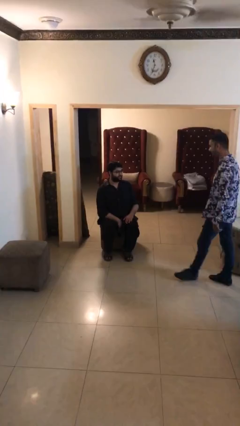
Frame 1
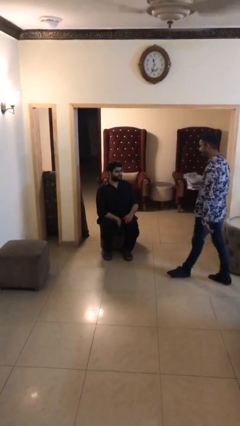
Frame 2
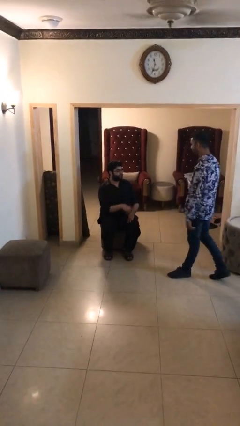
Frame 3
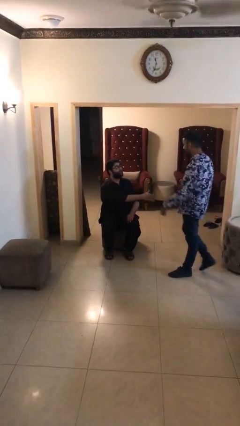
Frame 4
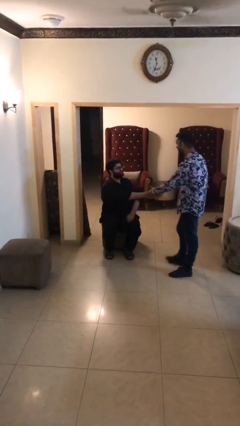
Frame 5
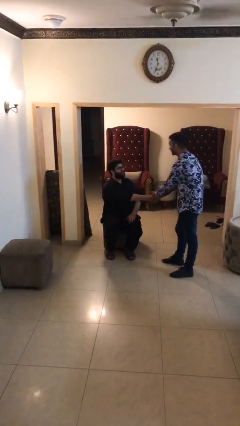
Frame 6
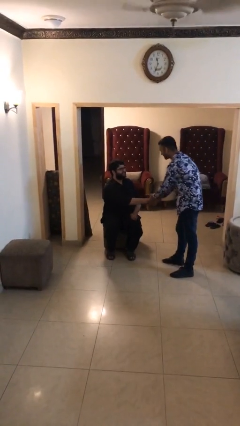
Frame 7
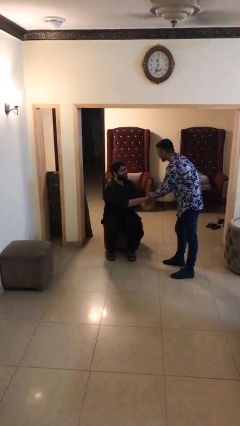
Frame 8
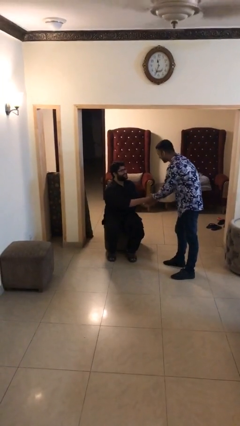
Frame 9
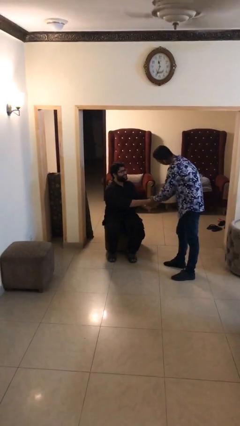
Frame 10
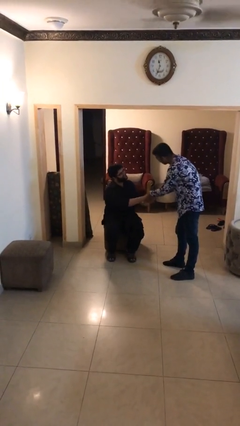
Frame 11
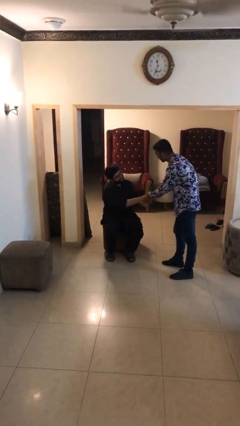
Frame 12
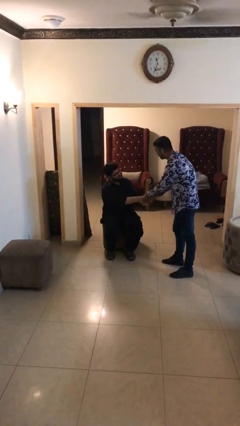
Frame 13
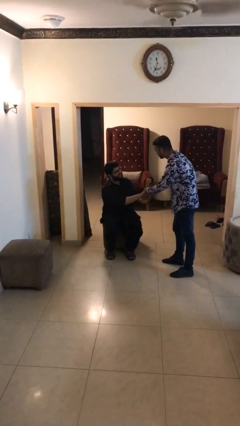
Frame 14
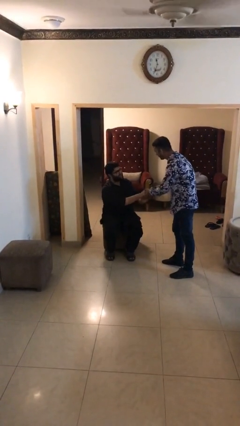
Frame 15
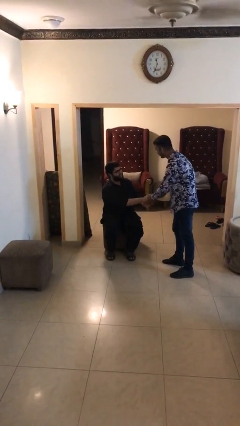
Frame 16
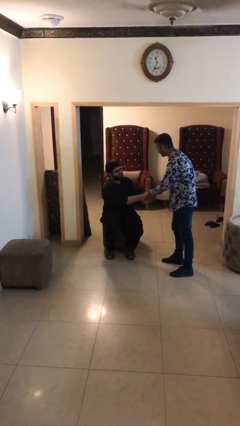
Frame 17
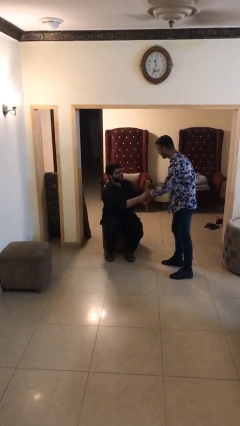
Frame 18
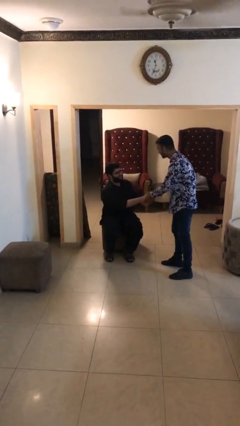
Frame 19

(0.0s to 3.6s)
person shakes hand

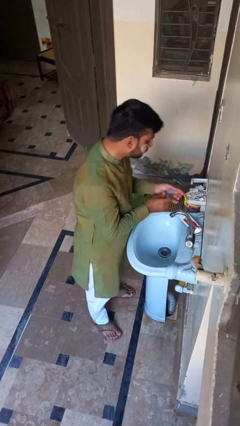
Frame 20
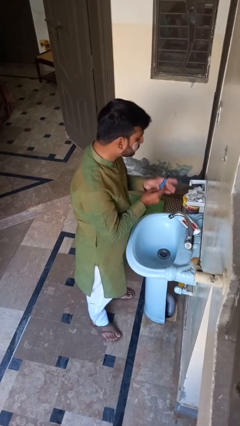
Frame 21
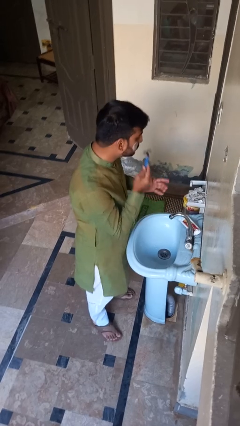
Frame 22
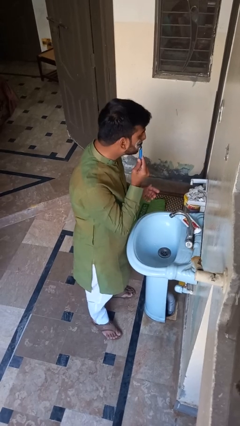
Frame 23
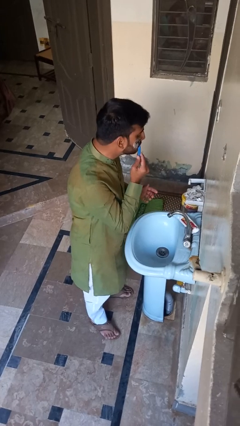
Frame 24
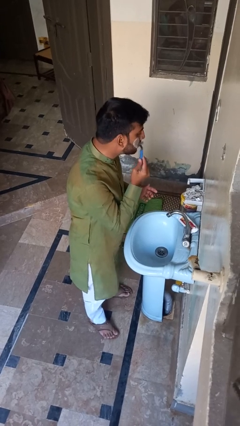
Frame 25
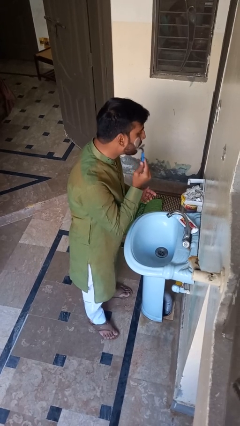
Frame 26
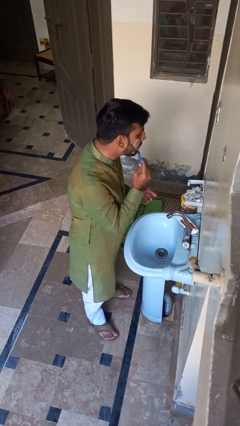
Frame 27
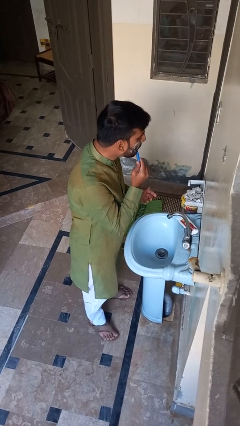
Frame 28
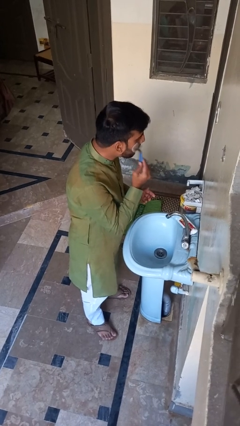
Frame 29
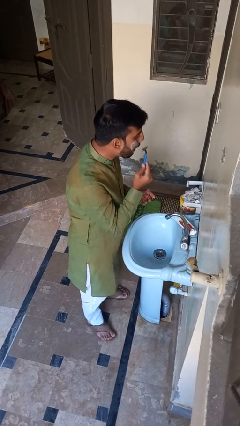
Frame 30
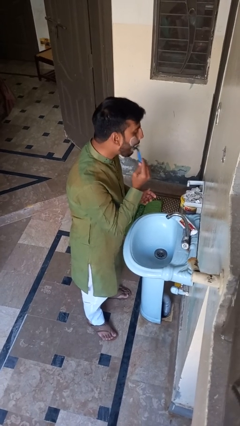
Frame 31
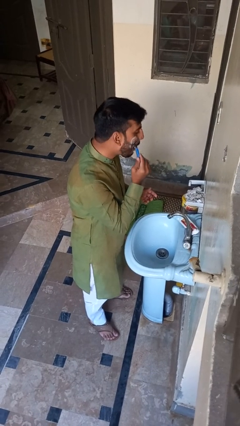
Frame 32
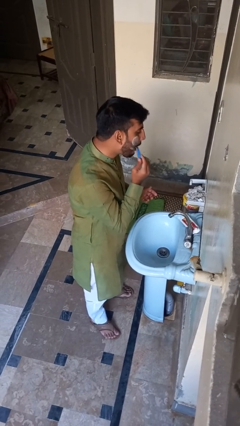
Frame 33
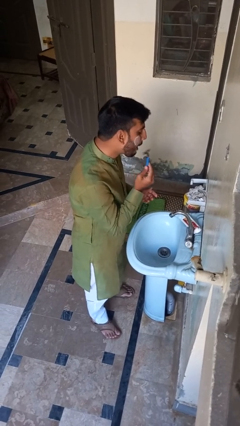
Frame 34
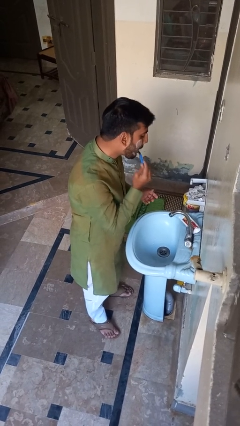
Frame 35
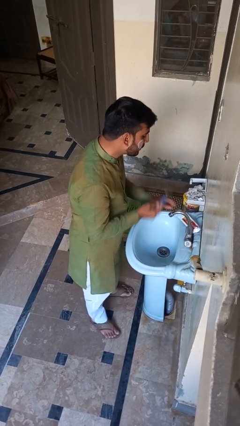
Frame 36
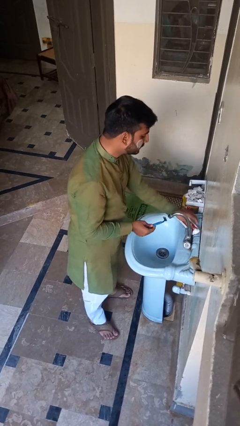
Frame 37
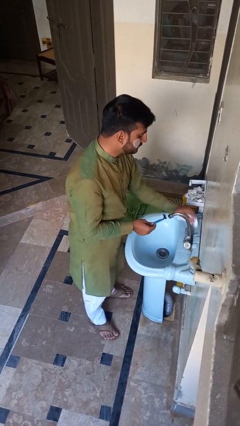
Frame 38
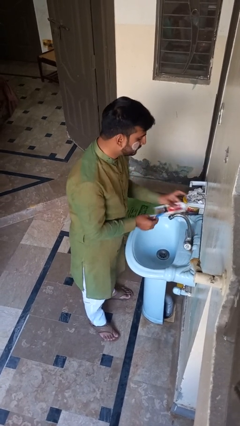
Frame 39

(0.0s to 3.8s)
person shaves face

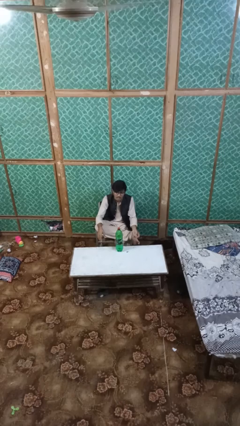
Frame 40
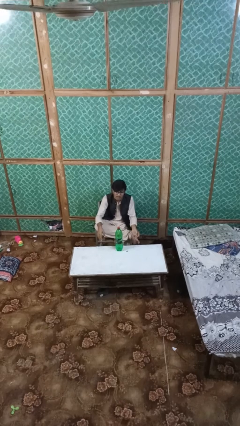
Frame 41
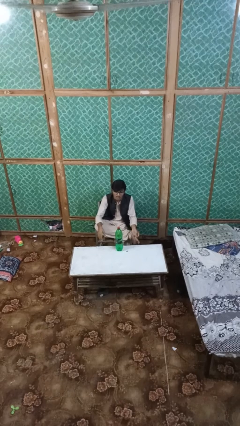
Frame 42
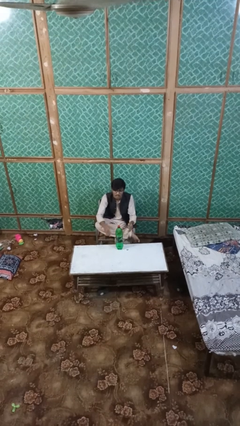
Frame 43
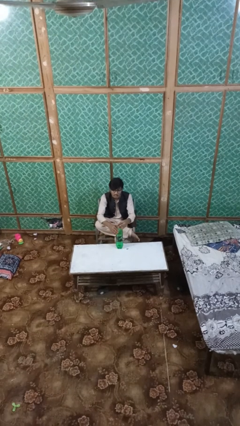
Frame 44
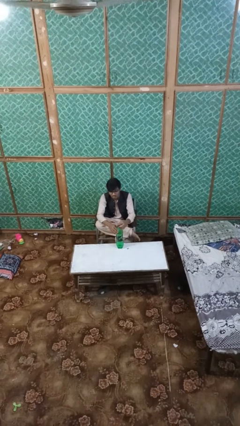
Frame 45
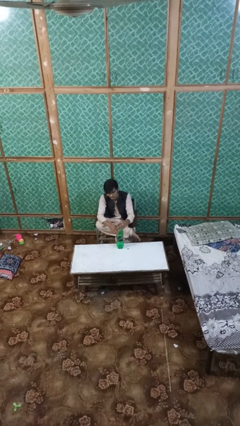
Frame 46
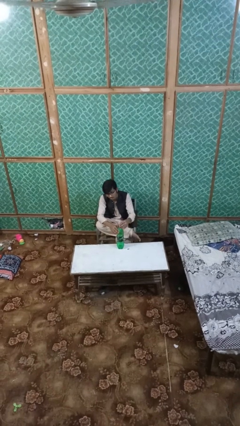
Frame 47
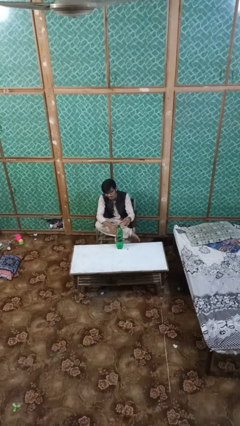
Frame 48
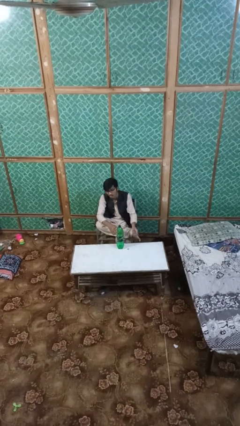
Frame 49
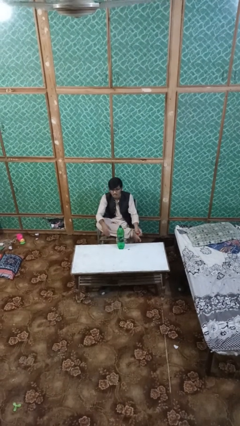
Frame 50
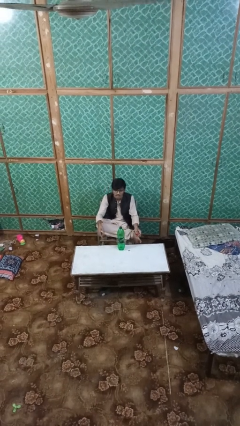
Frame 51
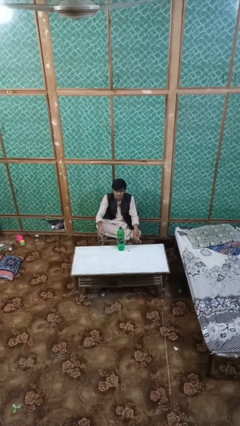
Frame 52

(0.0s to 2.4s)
person unscrews lid from bottle

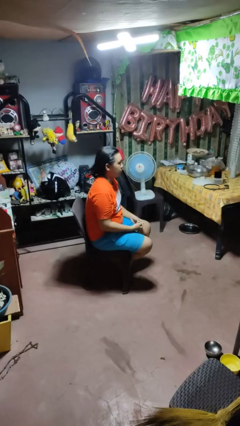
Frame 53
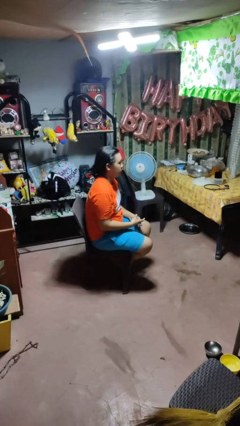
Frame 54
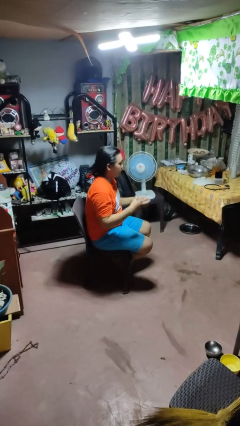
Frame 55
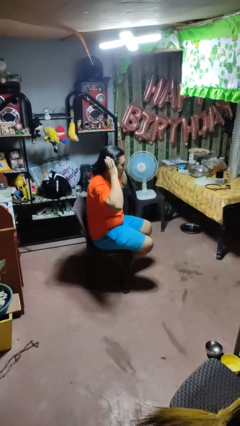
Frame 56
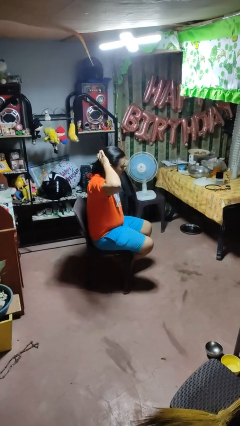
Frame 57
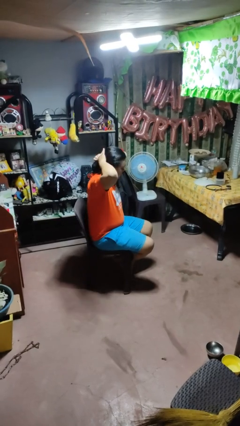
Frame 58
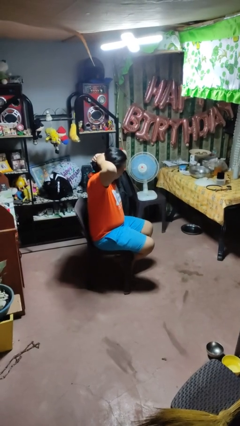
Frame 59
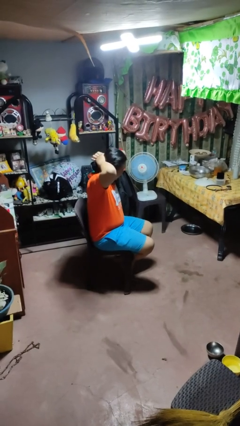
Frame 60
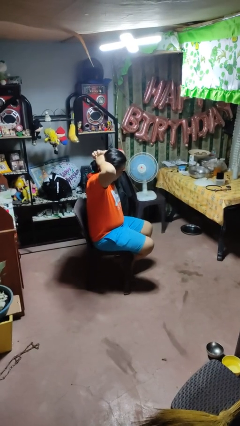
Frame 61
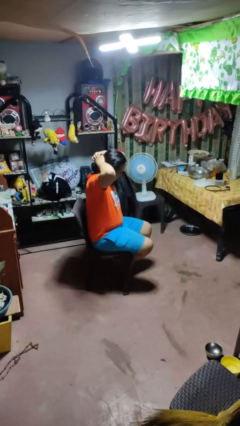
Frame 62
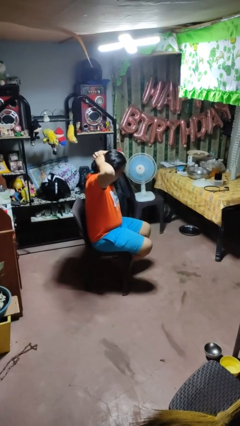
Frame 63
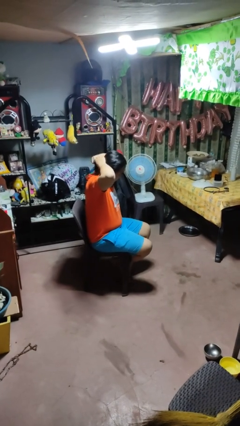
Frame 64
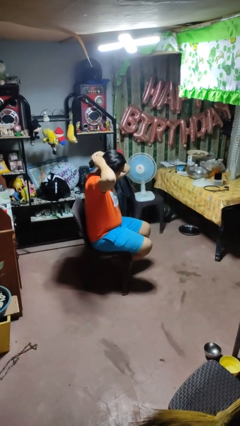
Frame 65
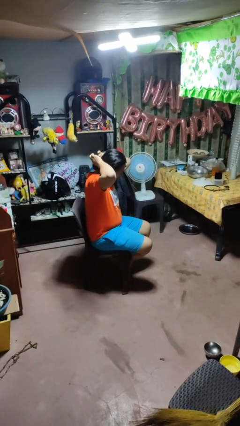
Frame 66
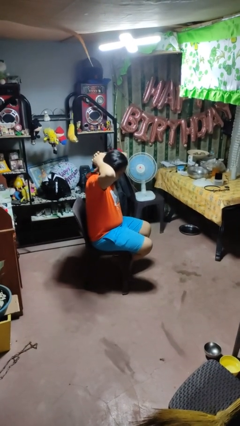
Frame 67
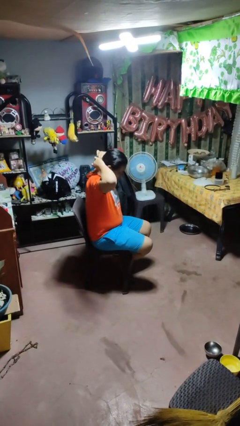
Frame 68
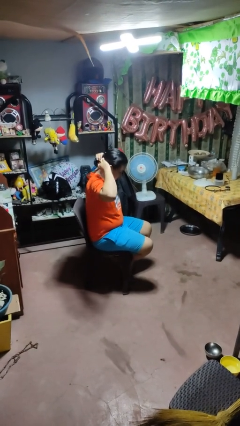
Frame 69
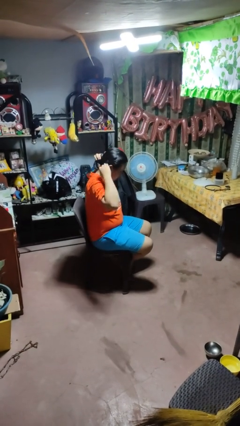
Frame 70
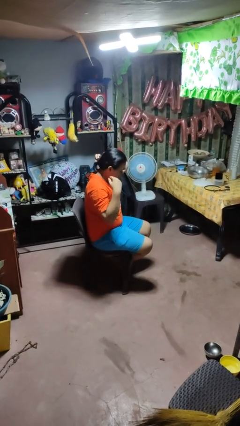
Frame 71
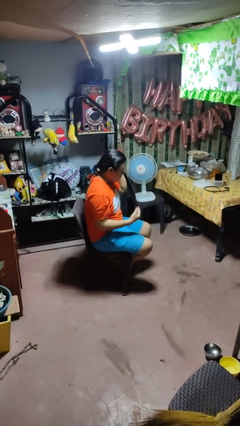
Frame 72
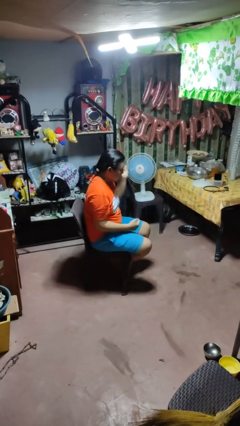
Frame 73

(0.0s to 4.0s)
person puts hair in ponytail

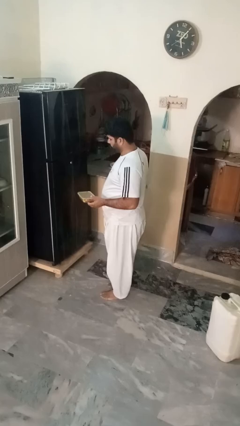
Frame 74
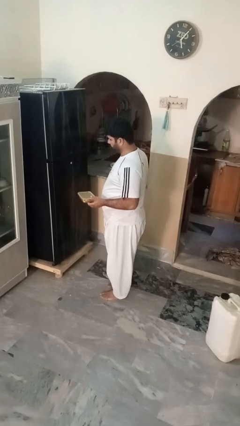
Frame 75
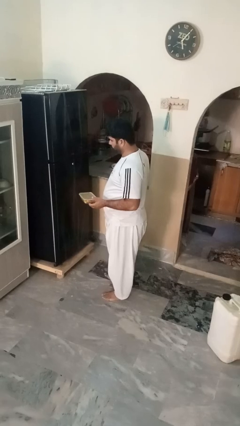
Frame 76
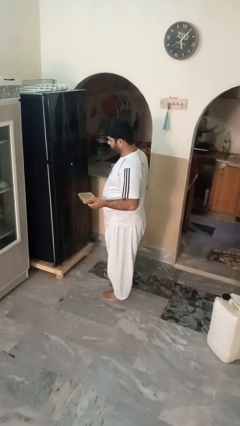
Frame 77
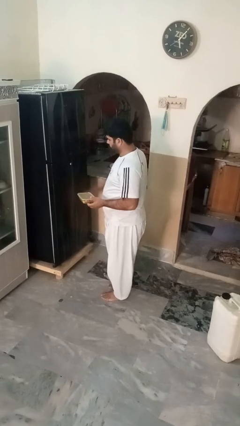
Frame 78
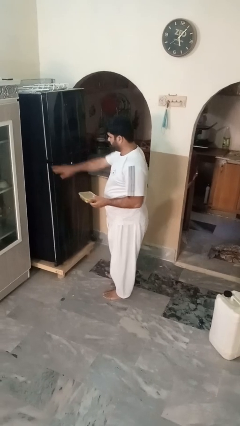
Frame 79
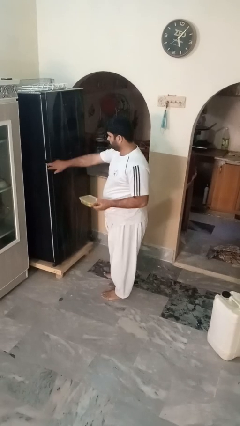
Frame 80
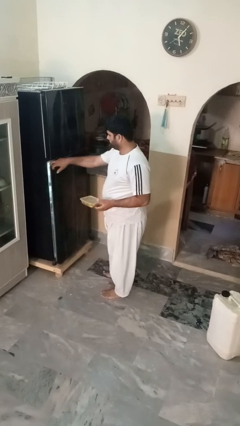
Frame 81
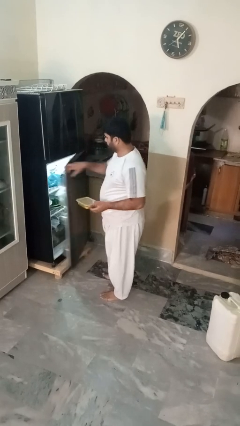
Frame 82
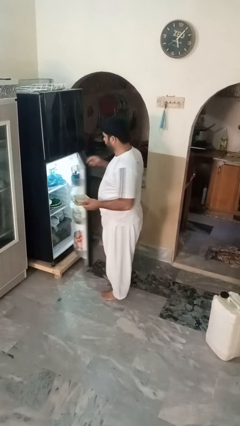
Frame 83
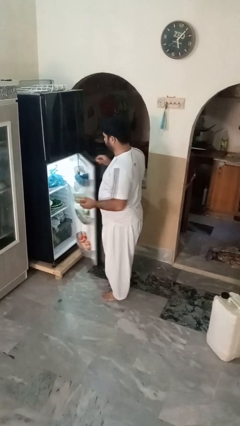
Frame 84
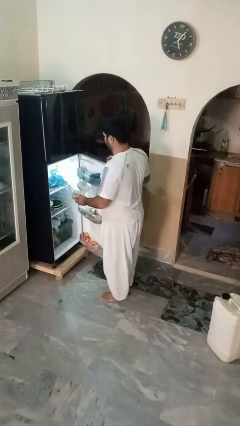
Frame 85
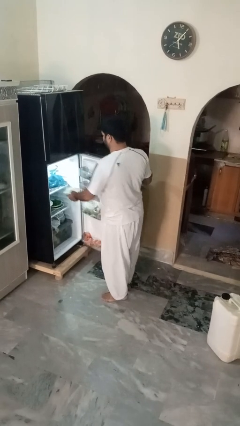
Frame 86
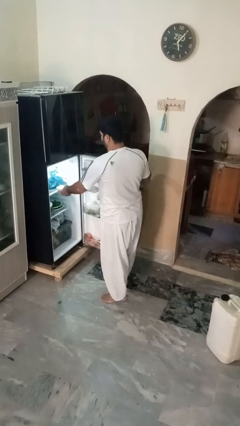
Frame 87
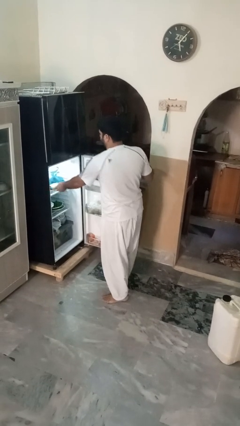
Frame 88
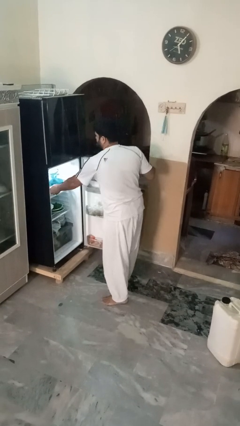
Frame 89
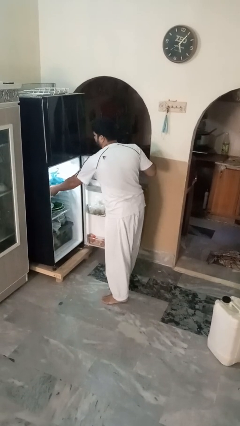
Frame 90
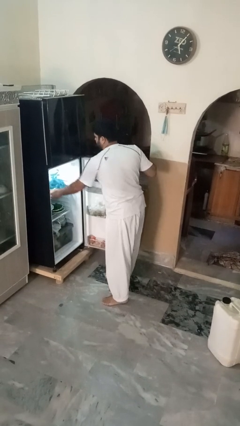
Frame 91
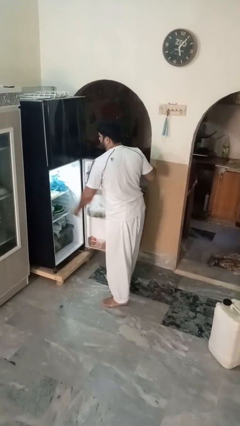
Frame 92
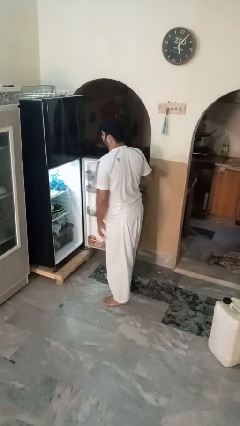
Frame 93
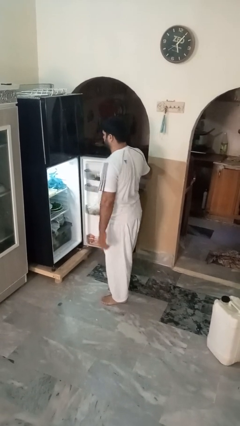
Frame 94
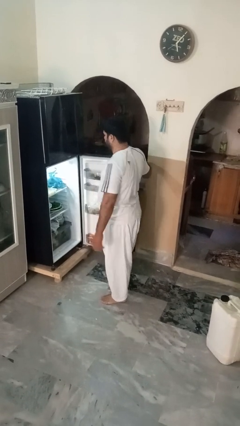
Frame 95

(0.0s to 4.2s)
person puts object into refrigerator
